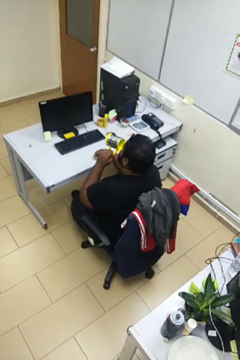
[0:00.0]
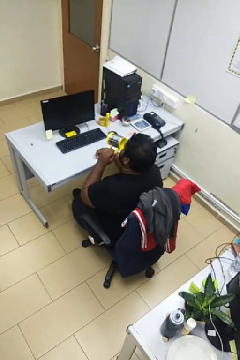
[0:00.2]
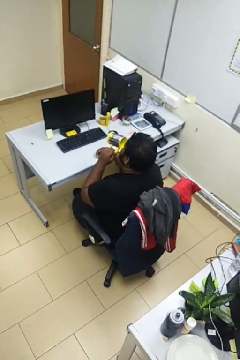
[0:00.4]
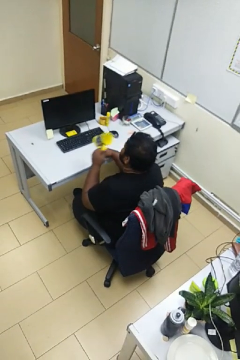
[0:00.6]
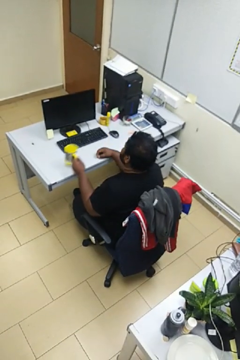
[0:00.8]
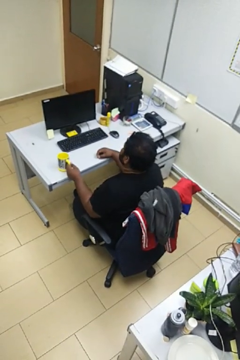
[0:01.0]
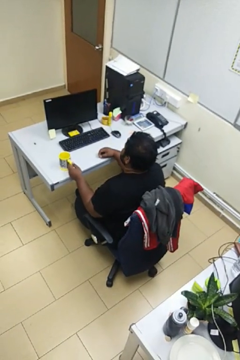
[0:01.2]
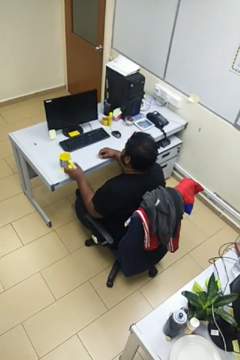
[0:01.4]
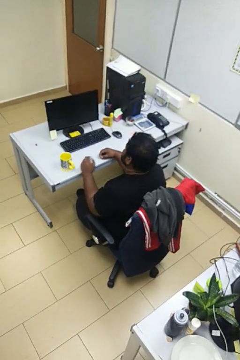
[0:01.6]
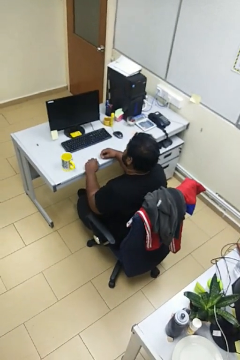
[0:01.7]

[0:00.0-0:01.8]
person puts down object on table

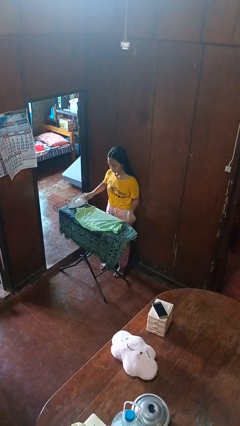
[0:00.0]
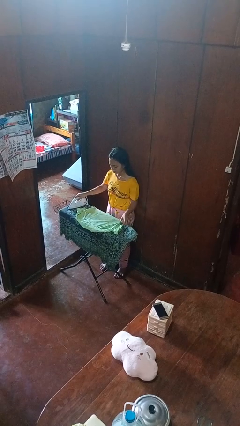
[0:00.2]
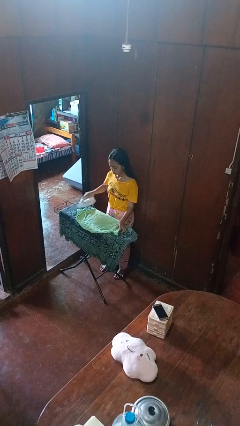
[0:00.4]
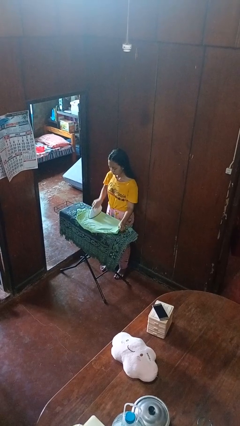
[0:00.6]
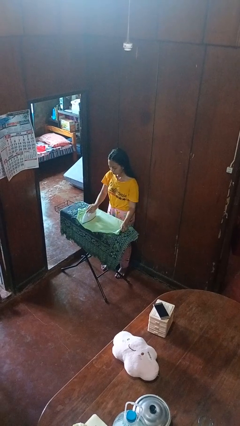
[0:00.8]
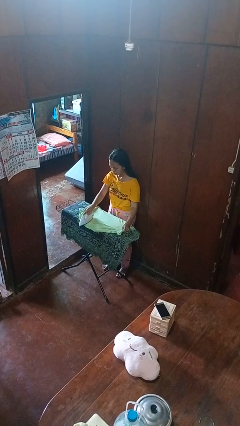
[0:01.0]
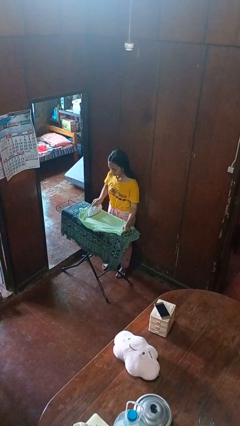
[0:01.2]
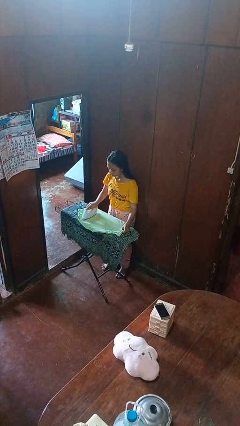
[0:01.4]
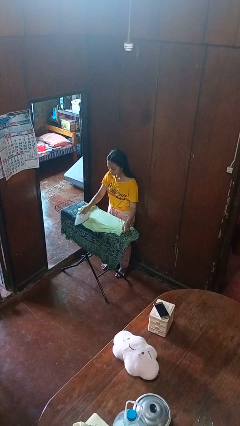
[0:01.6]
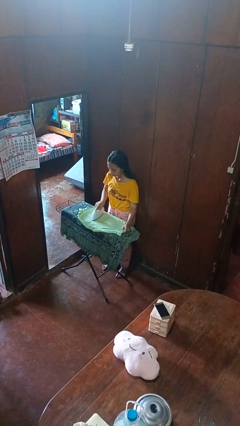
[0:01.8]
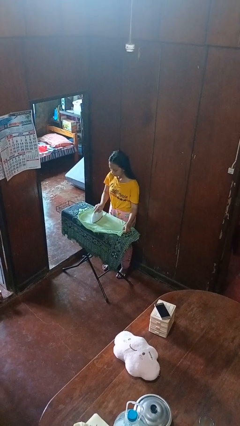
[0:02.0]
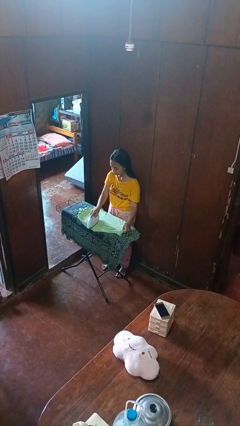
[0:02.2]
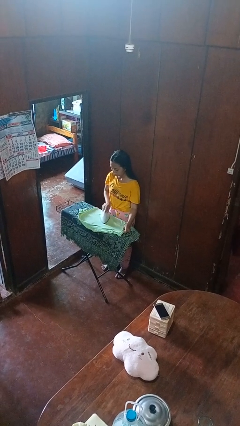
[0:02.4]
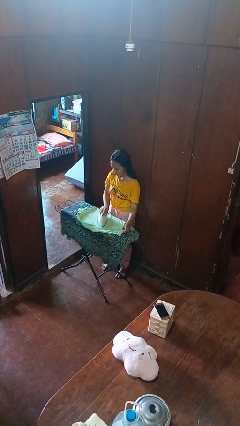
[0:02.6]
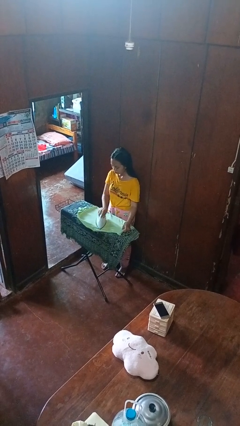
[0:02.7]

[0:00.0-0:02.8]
person irons clothes

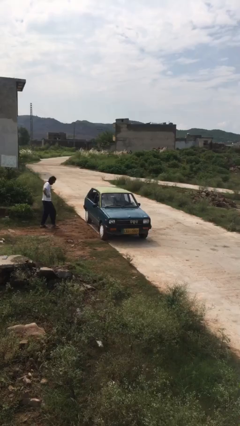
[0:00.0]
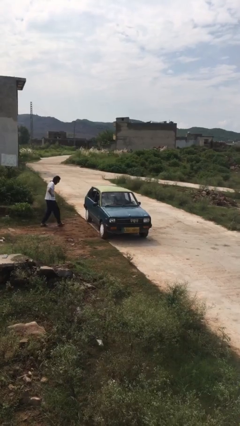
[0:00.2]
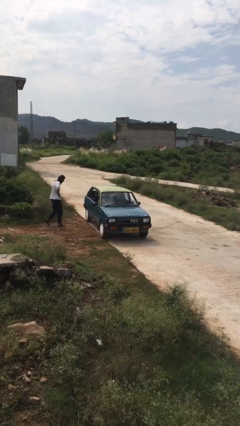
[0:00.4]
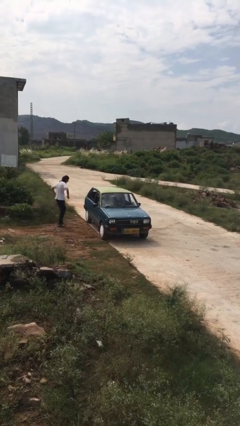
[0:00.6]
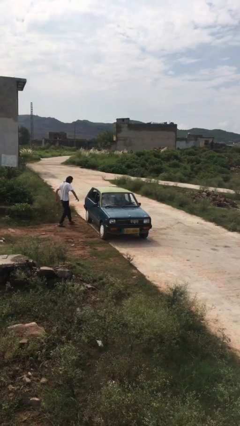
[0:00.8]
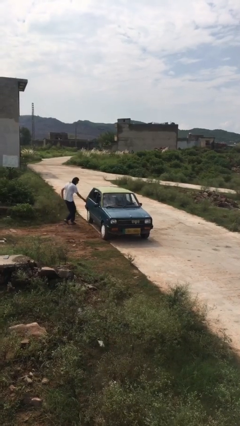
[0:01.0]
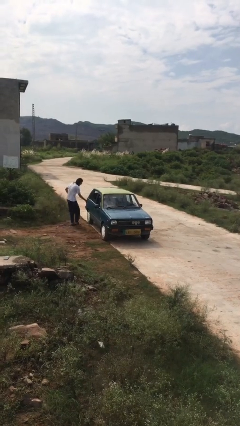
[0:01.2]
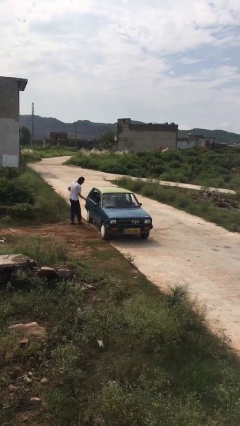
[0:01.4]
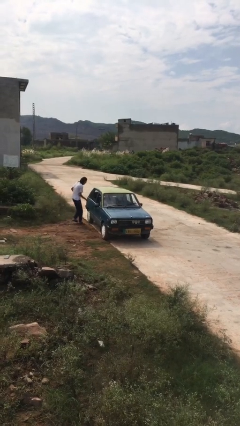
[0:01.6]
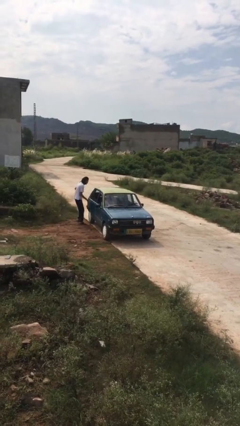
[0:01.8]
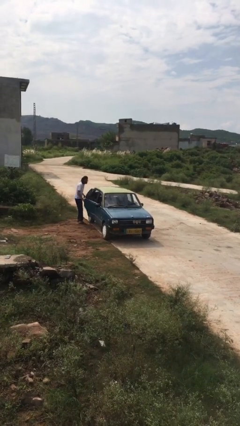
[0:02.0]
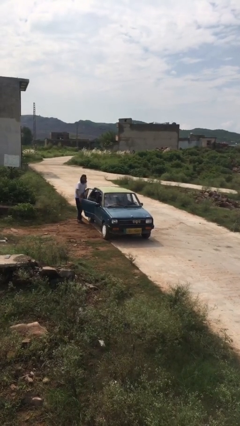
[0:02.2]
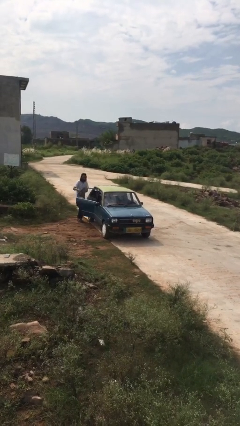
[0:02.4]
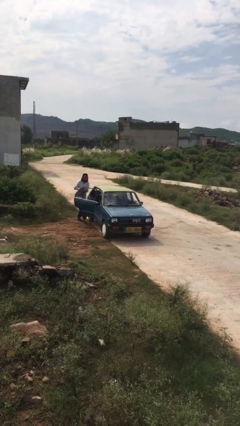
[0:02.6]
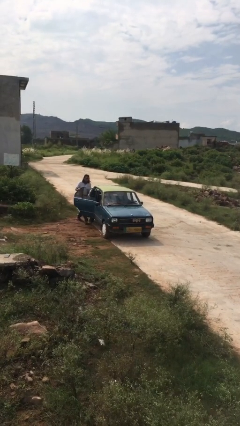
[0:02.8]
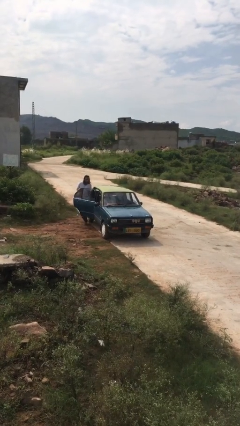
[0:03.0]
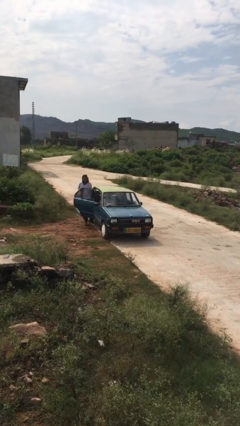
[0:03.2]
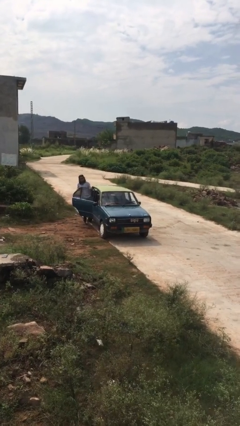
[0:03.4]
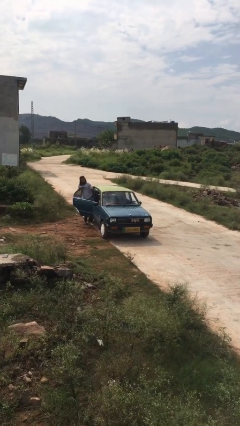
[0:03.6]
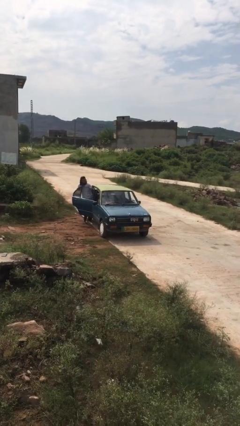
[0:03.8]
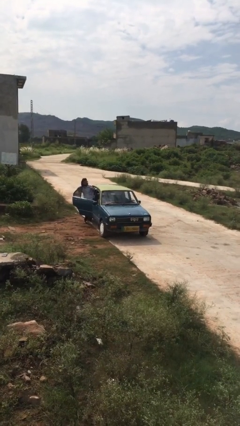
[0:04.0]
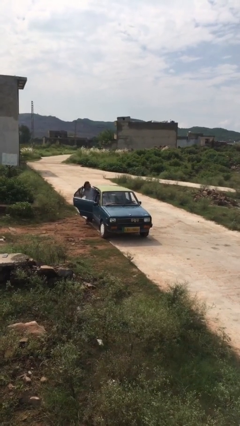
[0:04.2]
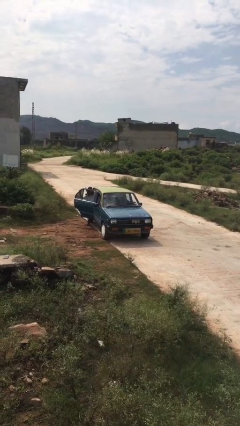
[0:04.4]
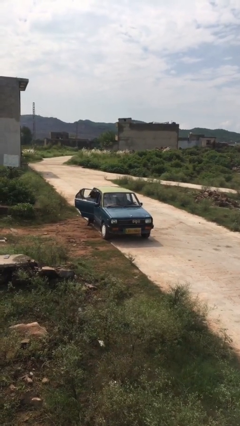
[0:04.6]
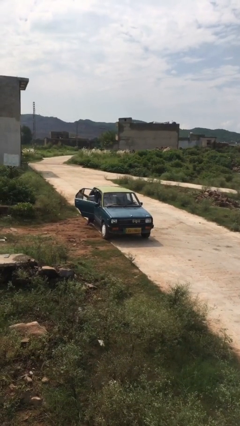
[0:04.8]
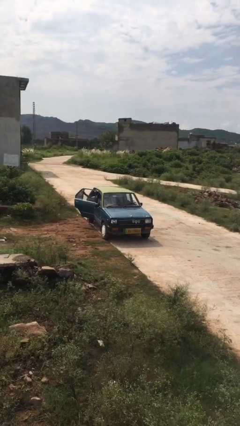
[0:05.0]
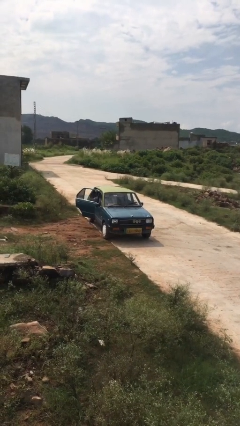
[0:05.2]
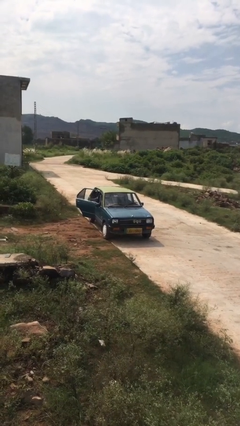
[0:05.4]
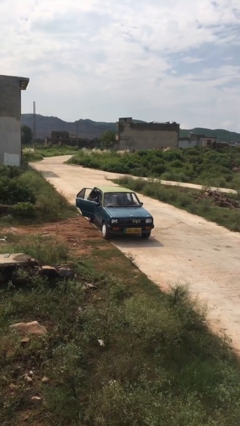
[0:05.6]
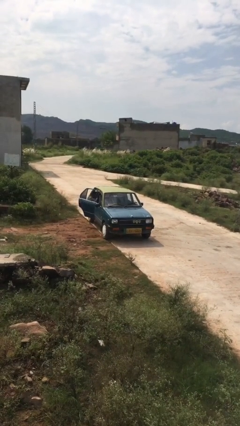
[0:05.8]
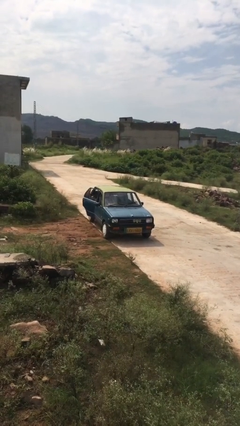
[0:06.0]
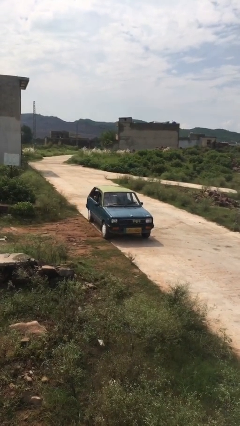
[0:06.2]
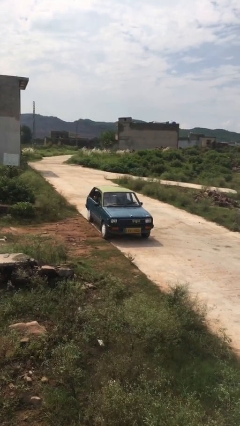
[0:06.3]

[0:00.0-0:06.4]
car picks up person

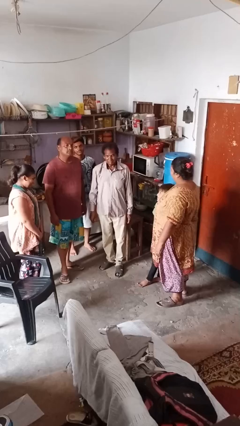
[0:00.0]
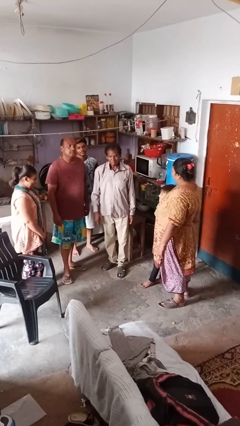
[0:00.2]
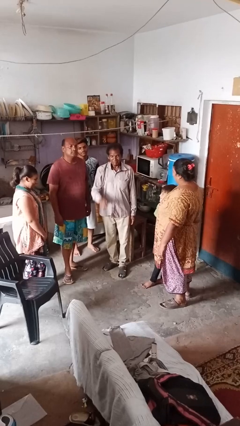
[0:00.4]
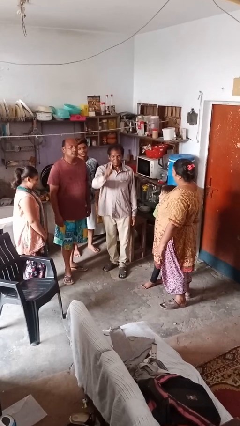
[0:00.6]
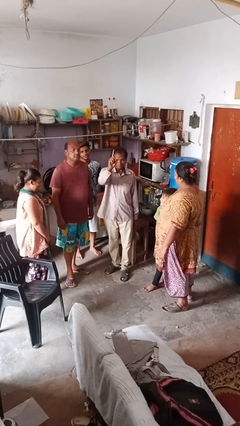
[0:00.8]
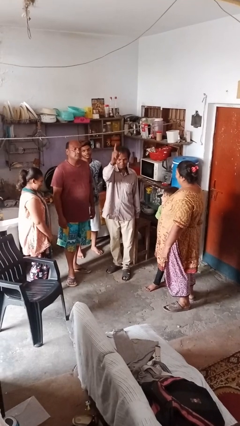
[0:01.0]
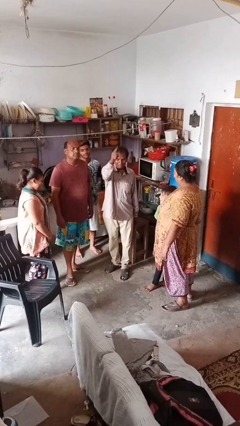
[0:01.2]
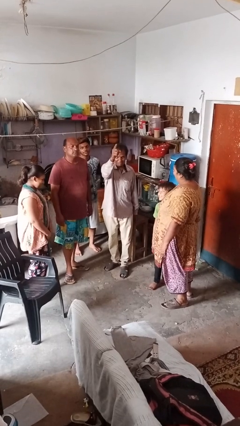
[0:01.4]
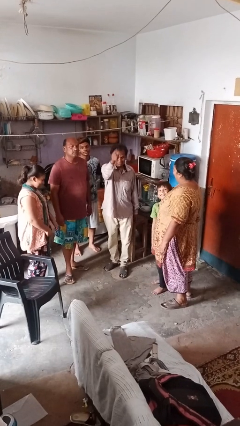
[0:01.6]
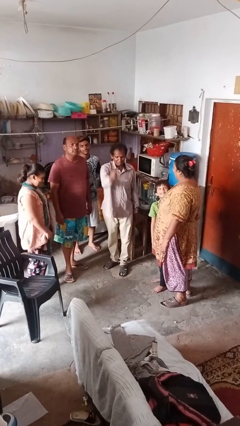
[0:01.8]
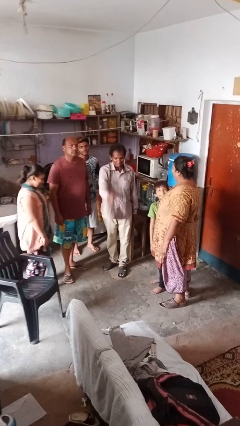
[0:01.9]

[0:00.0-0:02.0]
person points at person

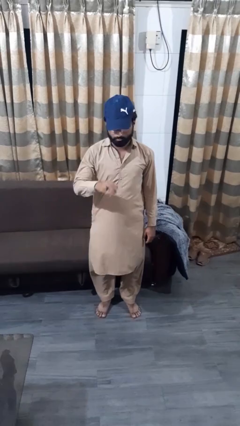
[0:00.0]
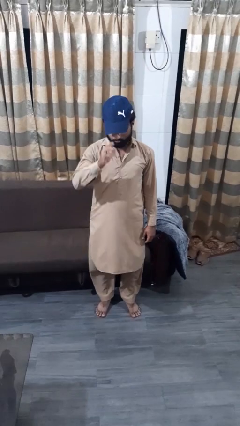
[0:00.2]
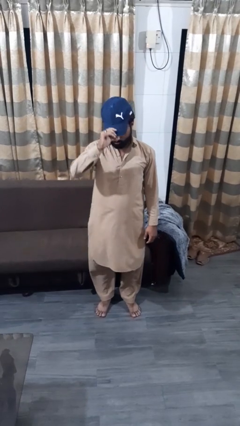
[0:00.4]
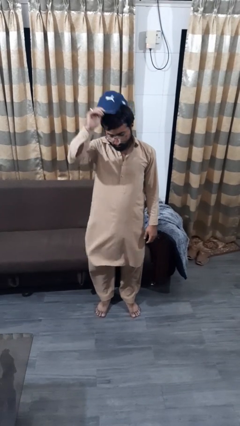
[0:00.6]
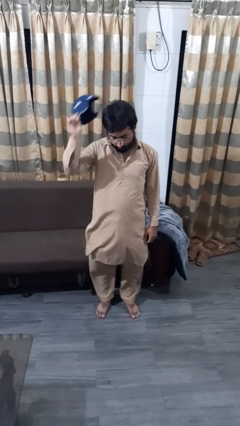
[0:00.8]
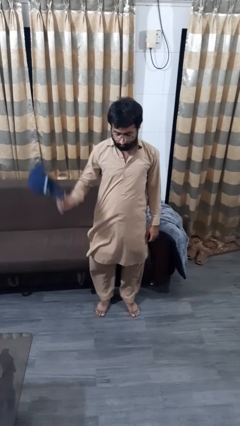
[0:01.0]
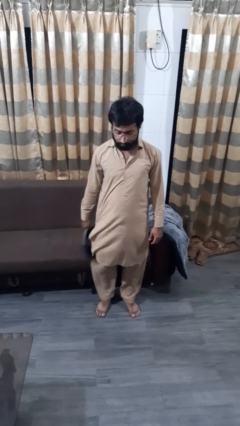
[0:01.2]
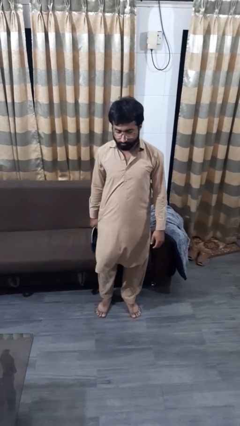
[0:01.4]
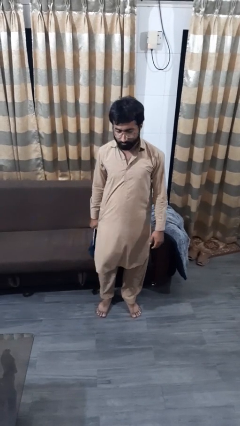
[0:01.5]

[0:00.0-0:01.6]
person takes off hat

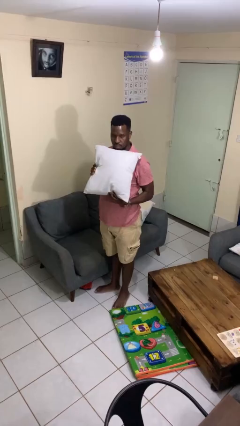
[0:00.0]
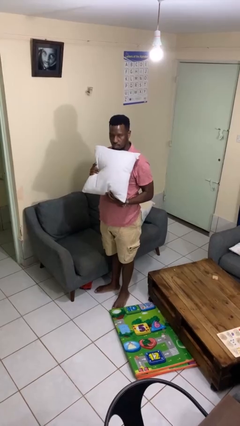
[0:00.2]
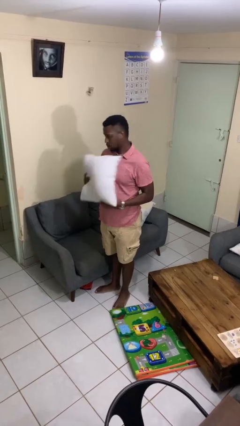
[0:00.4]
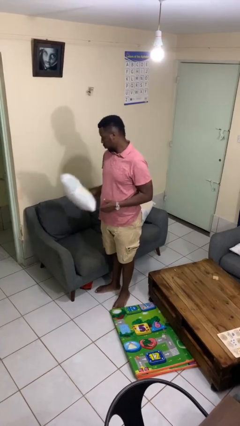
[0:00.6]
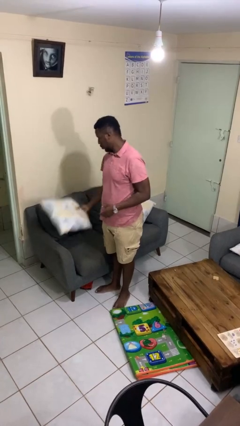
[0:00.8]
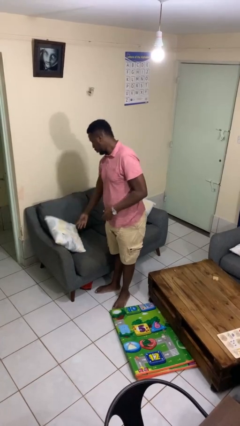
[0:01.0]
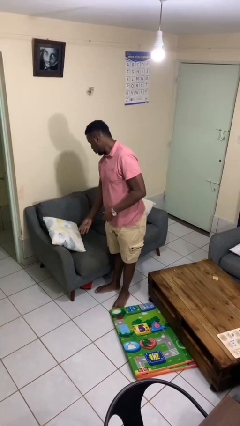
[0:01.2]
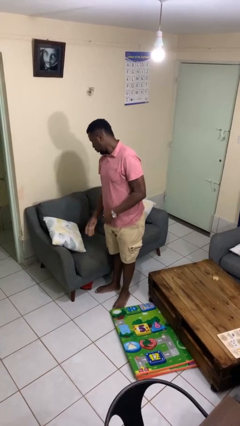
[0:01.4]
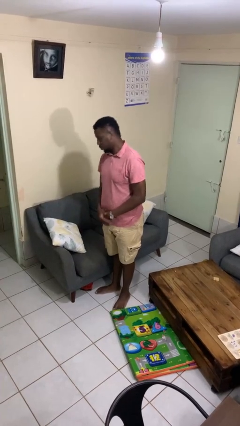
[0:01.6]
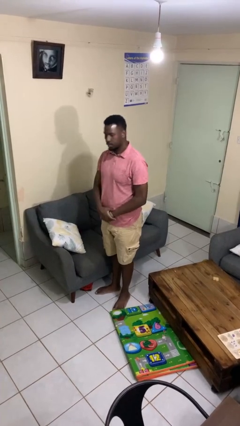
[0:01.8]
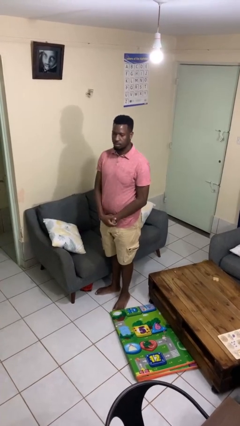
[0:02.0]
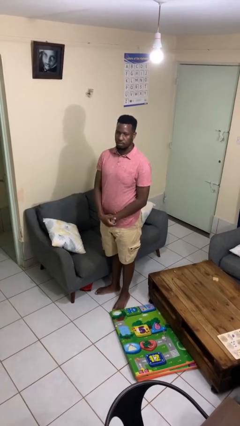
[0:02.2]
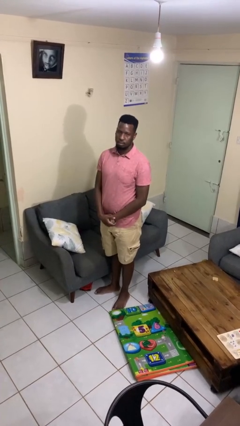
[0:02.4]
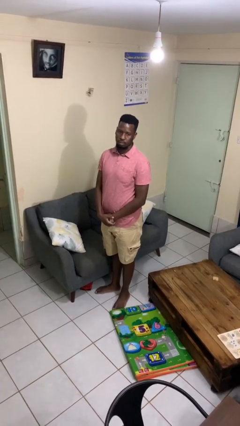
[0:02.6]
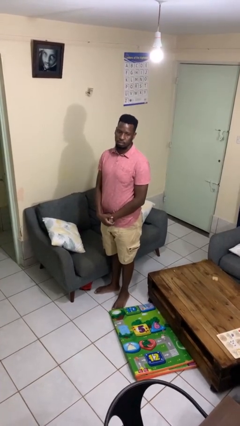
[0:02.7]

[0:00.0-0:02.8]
person puts down object on couch
